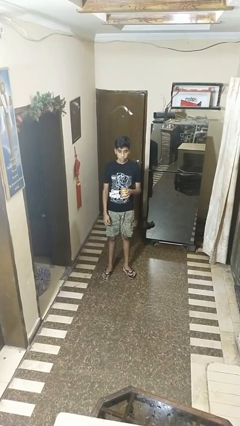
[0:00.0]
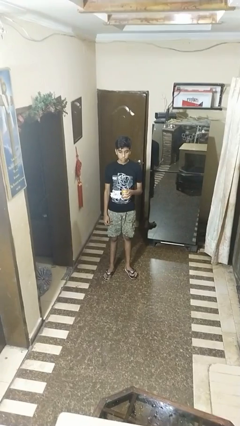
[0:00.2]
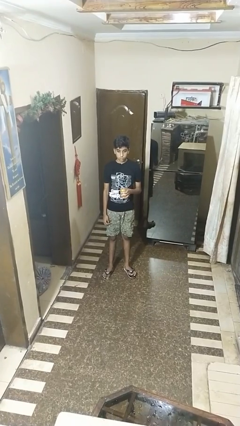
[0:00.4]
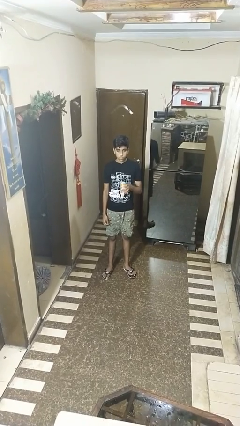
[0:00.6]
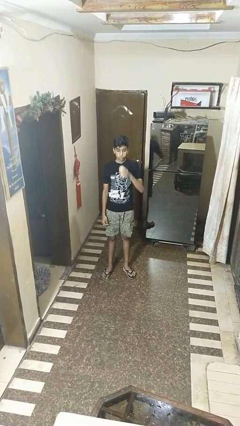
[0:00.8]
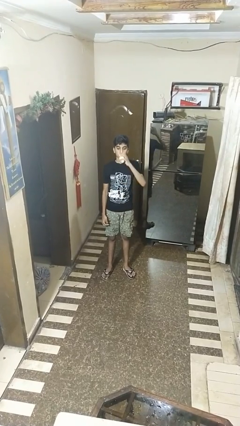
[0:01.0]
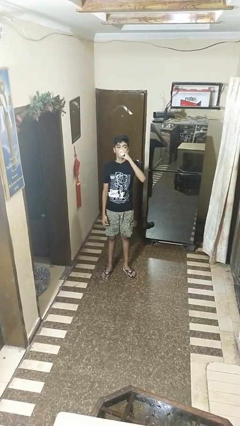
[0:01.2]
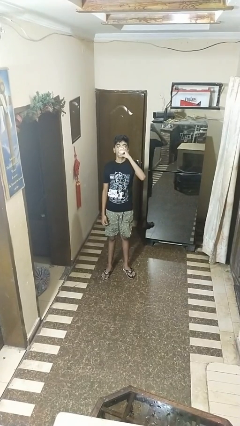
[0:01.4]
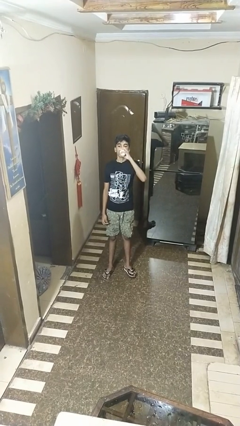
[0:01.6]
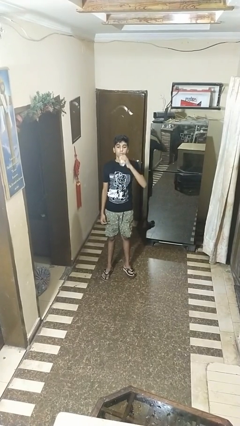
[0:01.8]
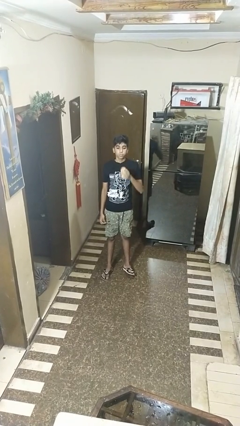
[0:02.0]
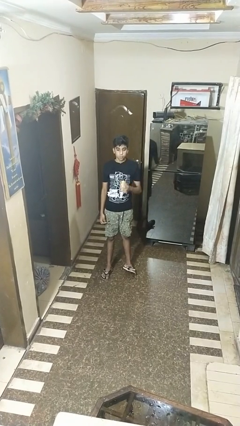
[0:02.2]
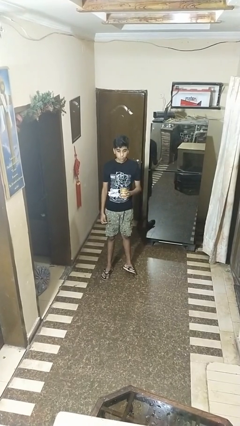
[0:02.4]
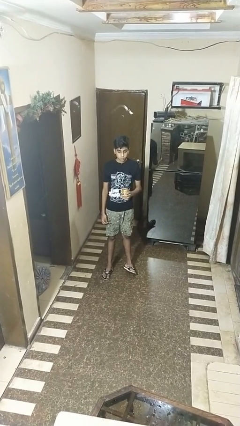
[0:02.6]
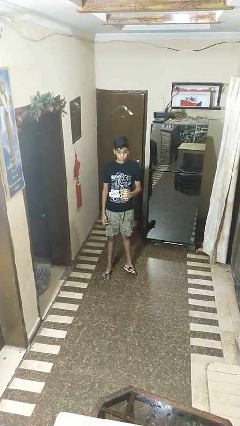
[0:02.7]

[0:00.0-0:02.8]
person drinks from beverage can

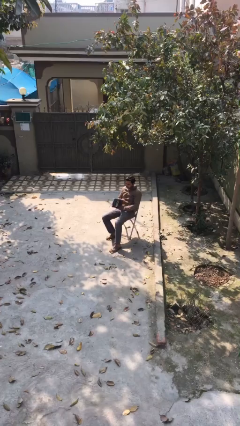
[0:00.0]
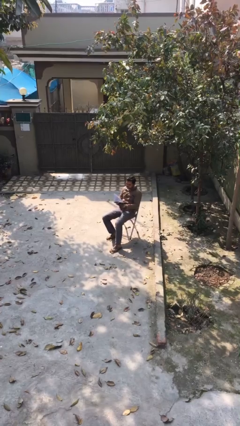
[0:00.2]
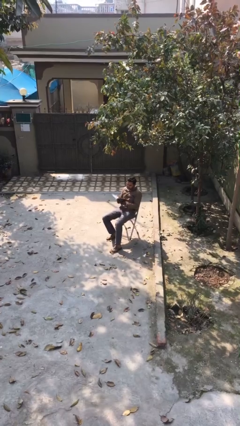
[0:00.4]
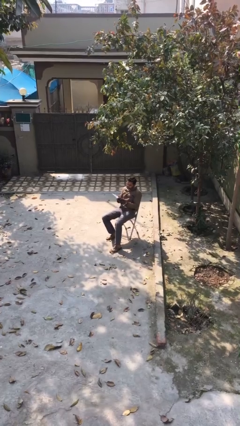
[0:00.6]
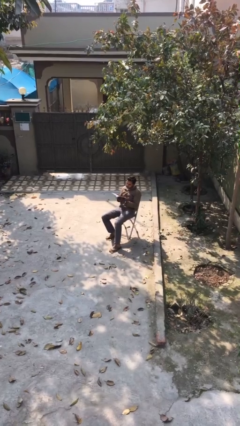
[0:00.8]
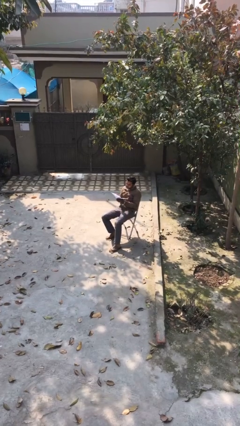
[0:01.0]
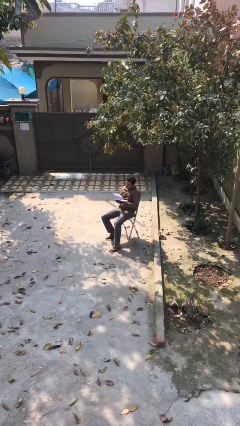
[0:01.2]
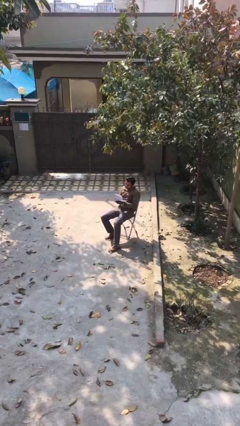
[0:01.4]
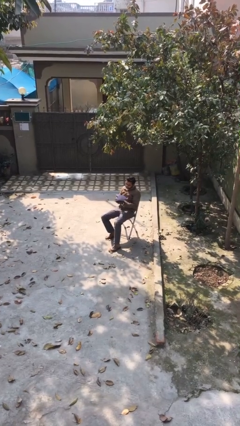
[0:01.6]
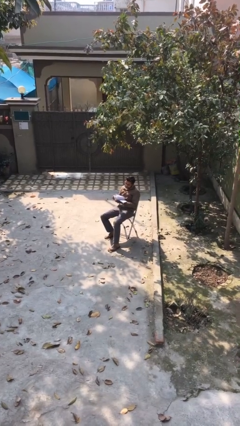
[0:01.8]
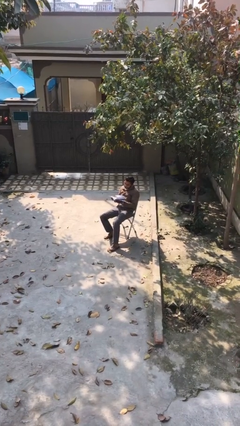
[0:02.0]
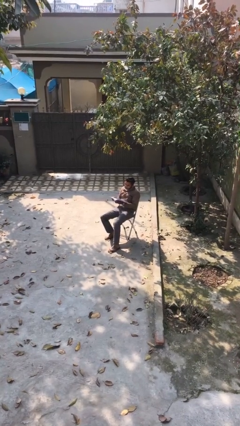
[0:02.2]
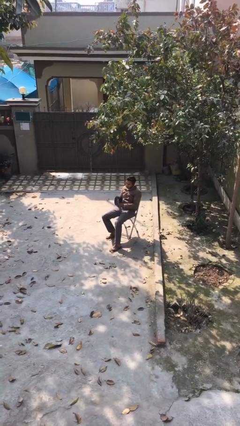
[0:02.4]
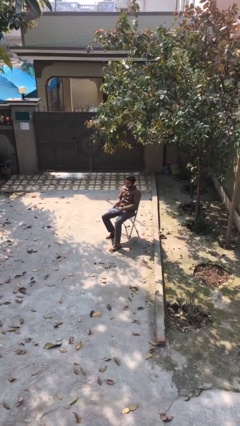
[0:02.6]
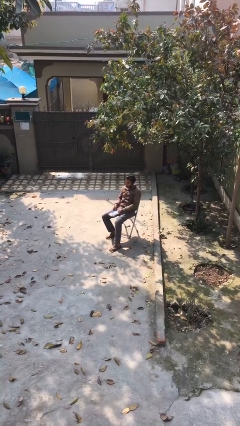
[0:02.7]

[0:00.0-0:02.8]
person reads document

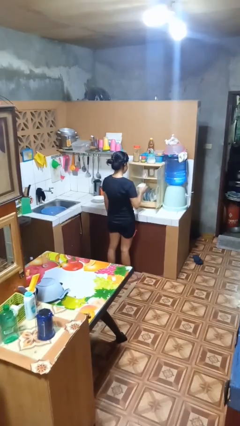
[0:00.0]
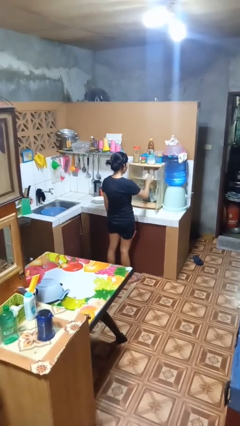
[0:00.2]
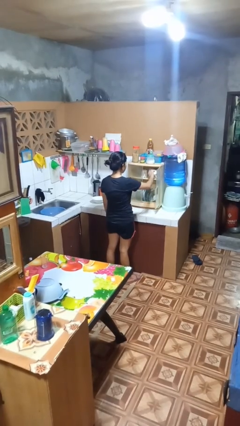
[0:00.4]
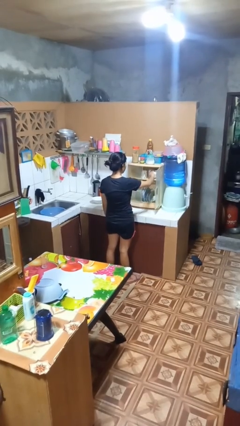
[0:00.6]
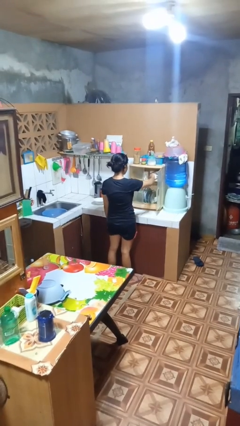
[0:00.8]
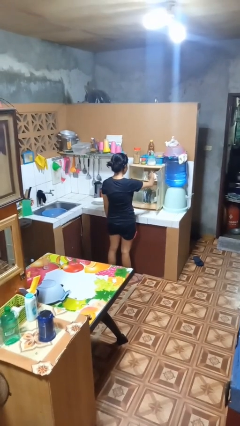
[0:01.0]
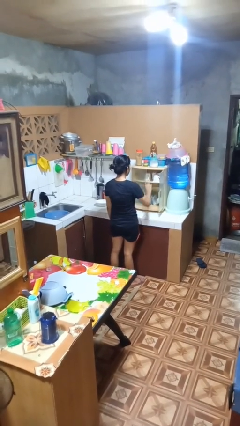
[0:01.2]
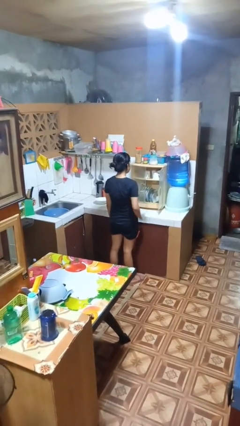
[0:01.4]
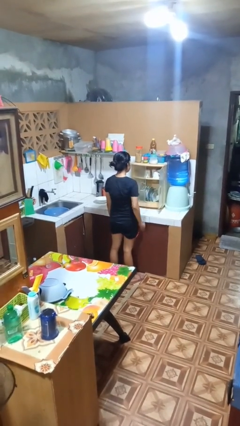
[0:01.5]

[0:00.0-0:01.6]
person puts object into kitchen drawer

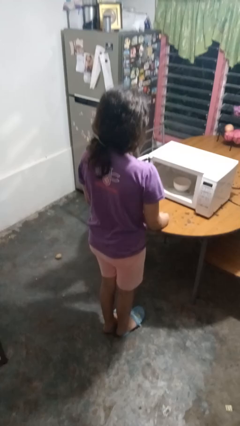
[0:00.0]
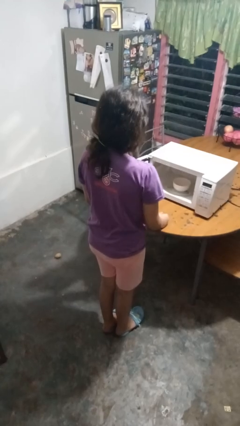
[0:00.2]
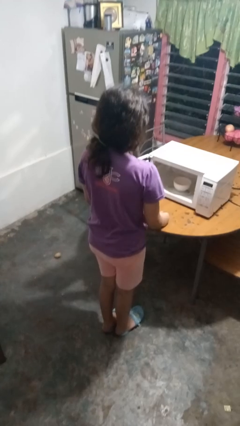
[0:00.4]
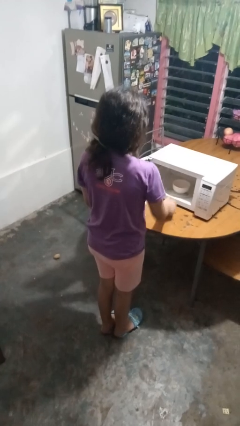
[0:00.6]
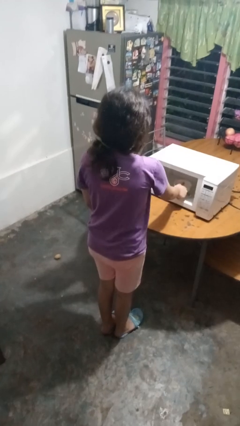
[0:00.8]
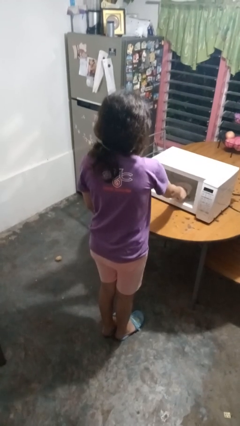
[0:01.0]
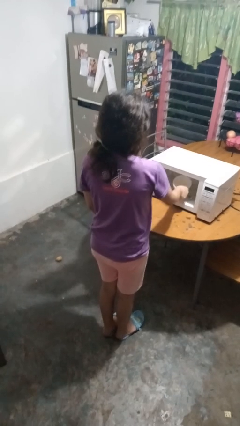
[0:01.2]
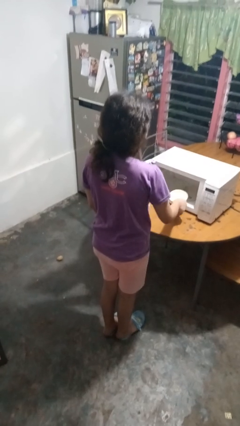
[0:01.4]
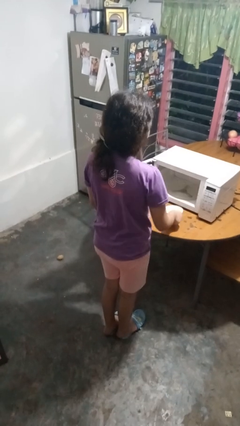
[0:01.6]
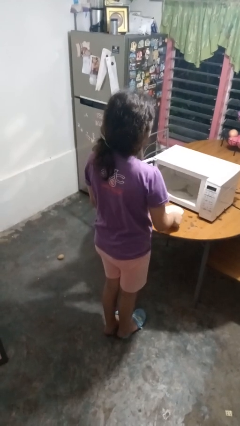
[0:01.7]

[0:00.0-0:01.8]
person takes object from microwave

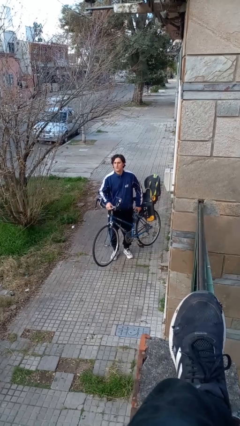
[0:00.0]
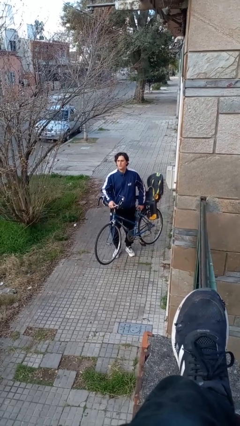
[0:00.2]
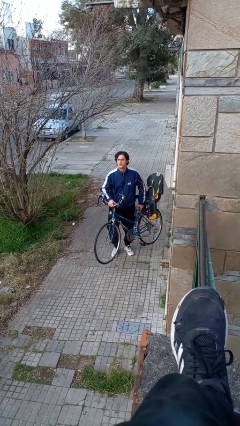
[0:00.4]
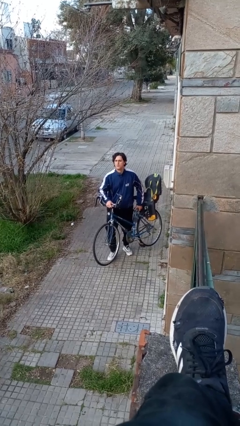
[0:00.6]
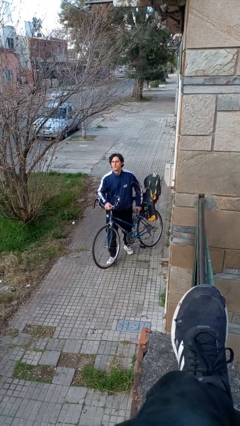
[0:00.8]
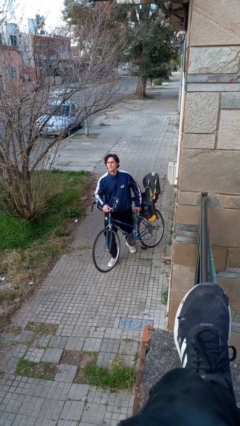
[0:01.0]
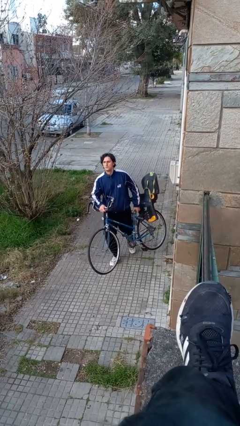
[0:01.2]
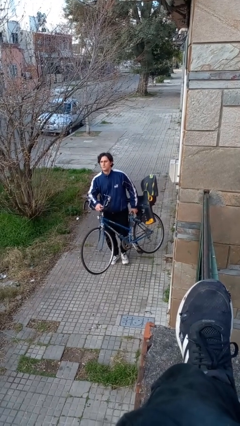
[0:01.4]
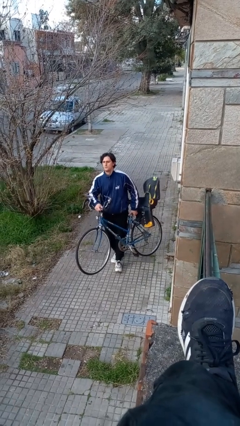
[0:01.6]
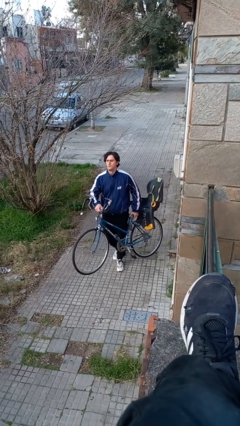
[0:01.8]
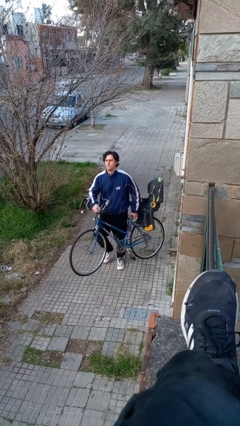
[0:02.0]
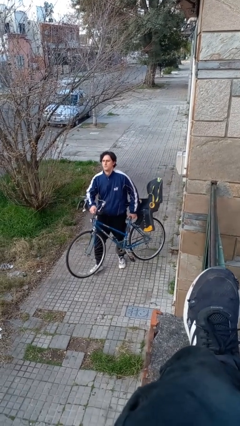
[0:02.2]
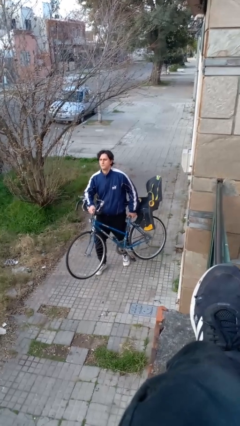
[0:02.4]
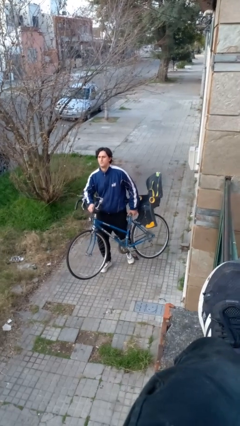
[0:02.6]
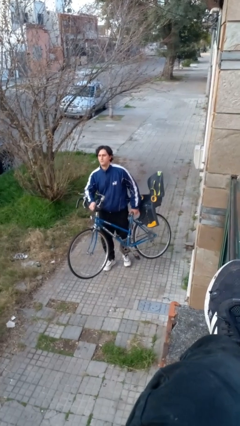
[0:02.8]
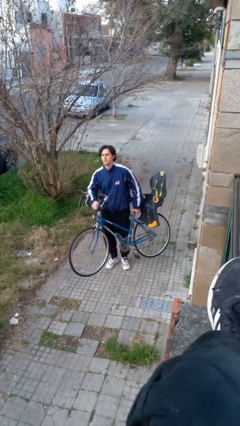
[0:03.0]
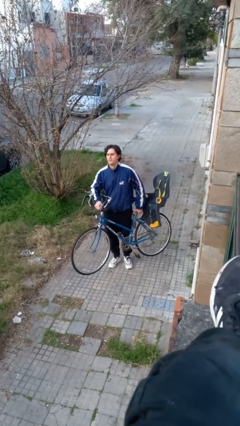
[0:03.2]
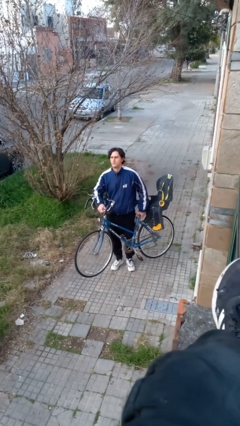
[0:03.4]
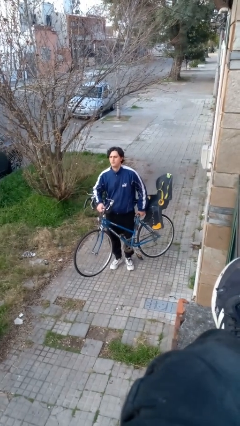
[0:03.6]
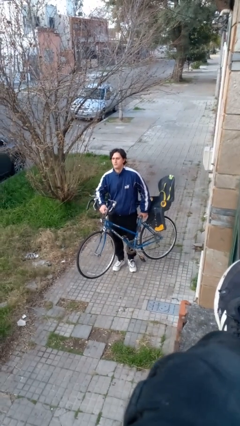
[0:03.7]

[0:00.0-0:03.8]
person carries bicycle

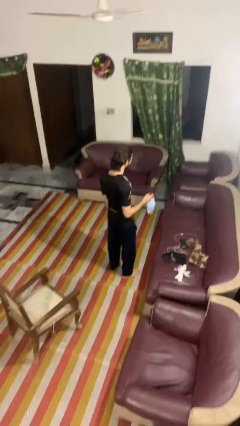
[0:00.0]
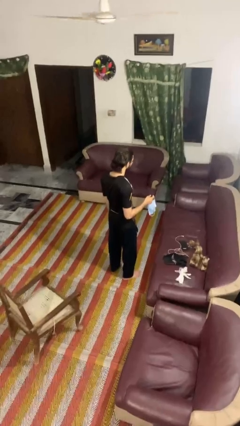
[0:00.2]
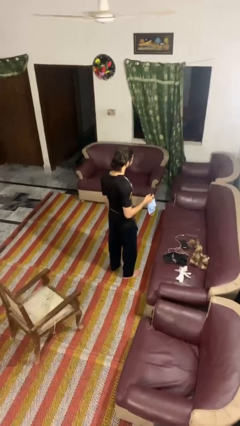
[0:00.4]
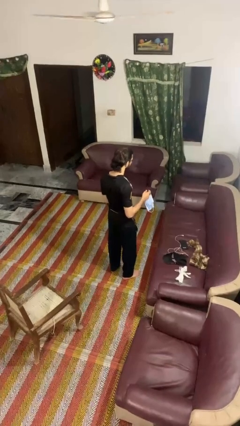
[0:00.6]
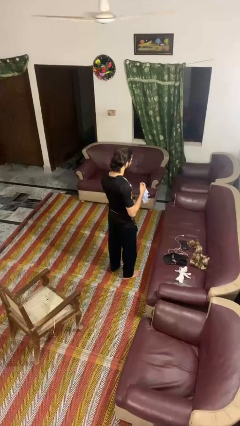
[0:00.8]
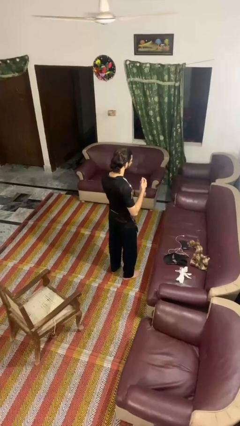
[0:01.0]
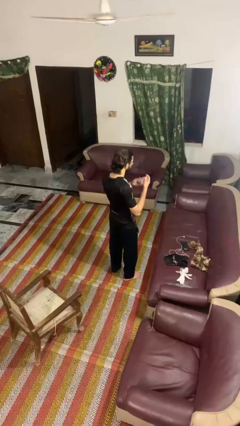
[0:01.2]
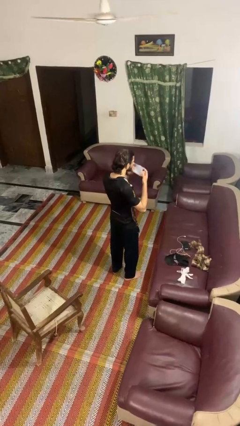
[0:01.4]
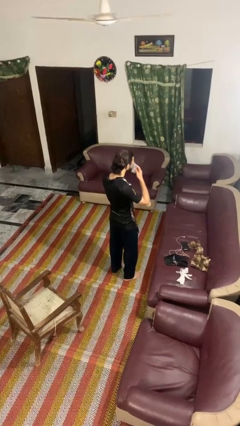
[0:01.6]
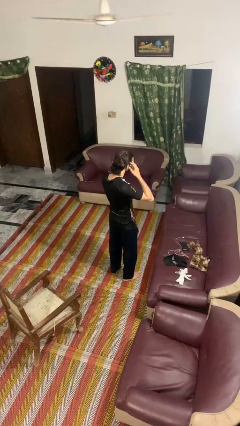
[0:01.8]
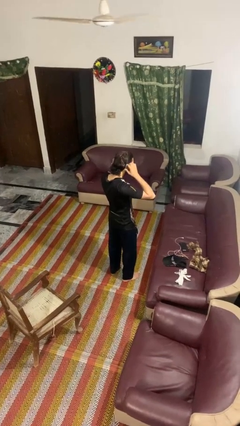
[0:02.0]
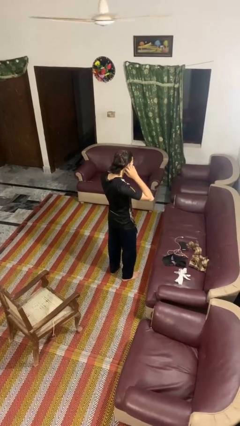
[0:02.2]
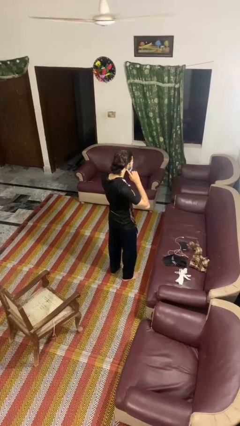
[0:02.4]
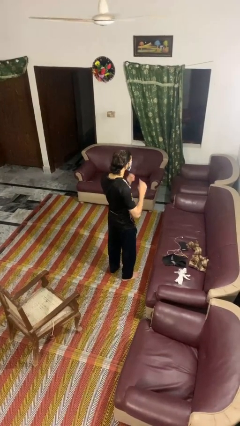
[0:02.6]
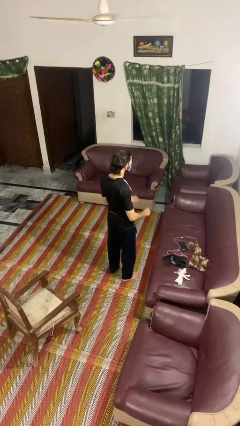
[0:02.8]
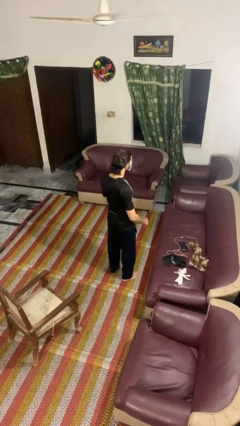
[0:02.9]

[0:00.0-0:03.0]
person puts on facemask

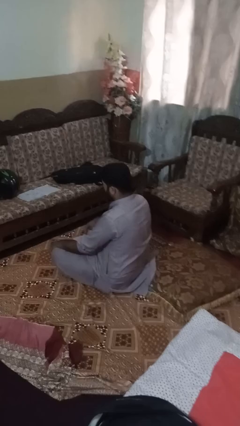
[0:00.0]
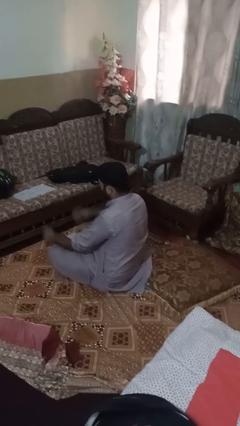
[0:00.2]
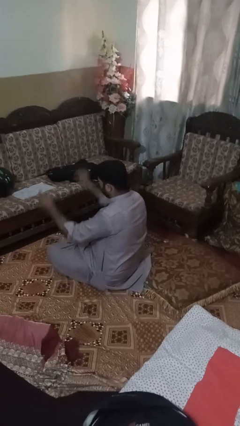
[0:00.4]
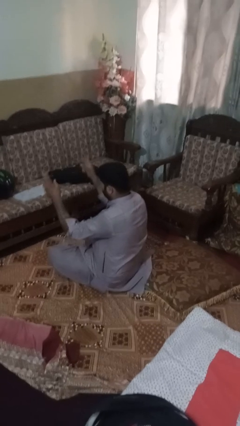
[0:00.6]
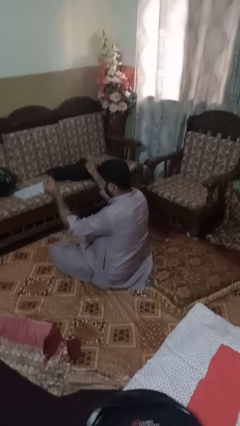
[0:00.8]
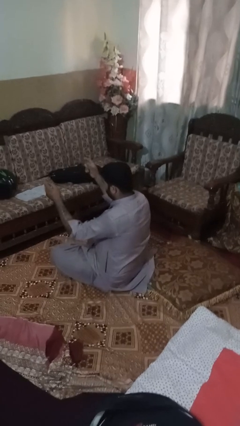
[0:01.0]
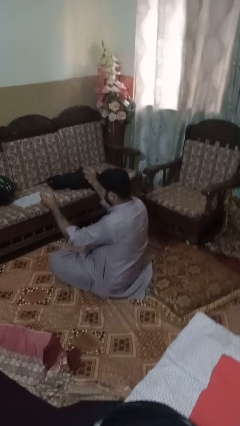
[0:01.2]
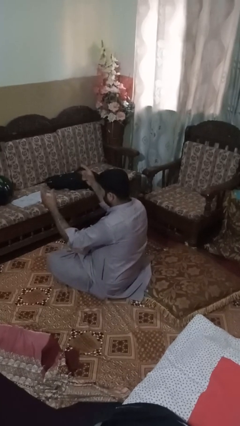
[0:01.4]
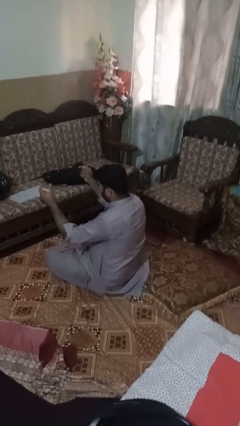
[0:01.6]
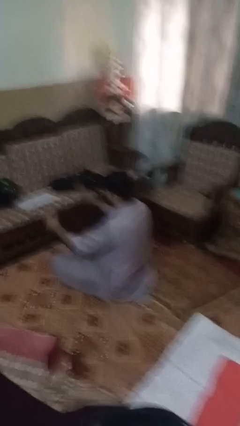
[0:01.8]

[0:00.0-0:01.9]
person snaps fingers
